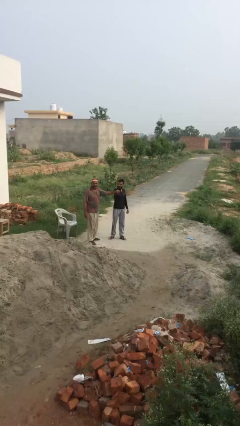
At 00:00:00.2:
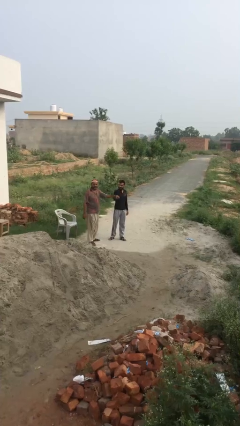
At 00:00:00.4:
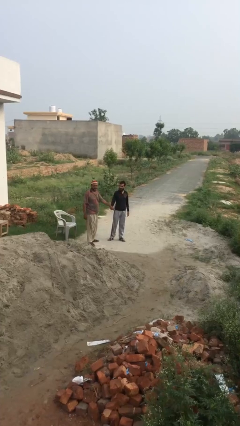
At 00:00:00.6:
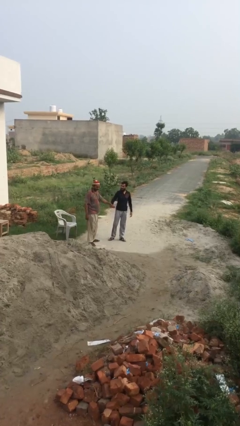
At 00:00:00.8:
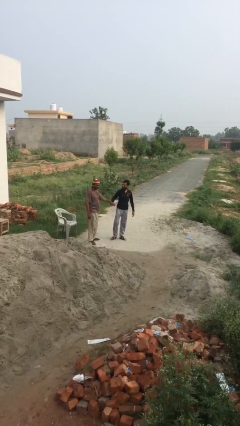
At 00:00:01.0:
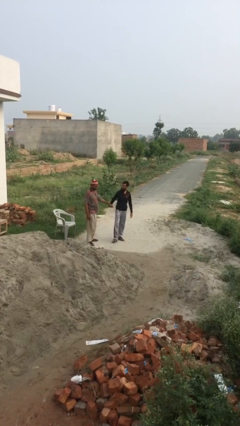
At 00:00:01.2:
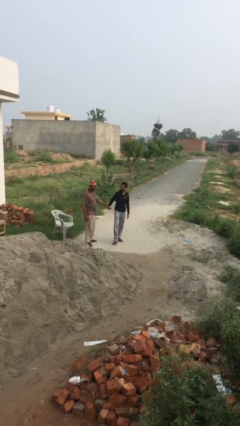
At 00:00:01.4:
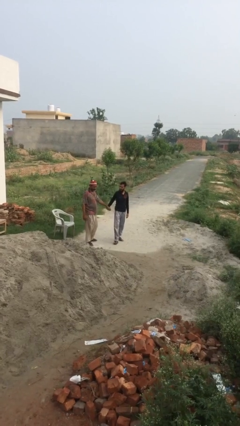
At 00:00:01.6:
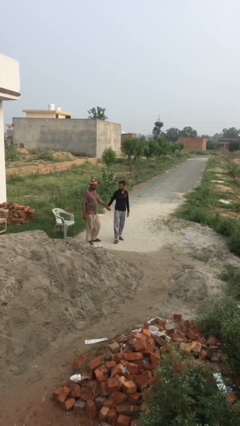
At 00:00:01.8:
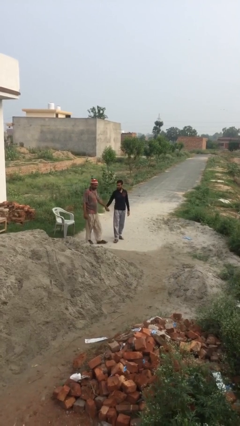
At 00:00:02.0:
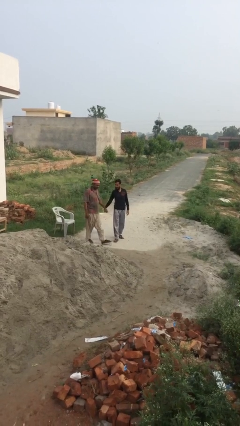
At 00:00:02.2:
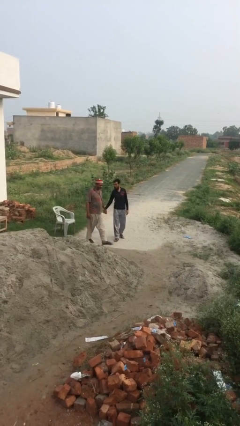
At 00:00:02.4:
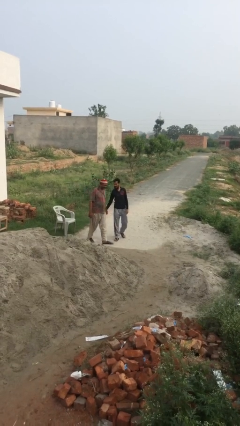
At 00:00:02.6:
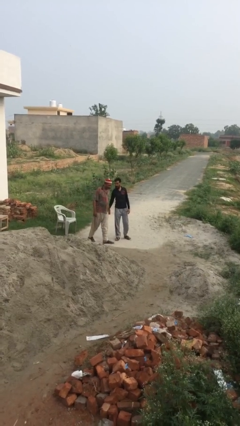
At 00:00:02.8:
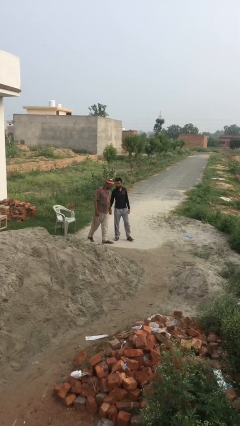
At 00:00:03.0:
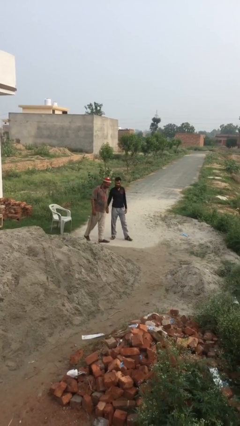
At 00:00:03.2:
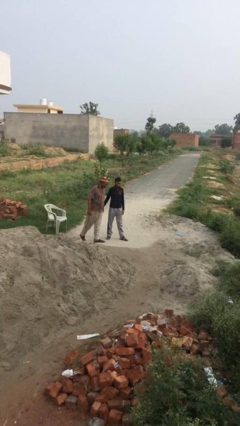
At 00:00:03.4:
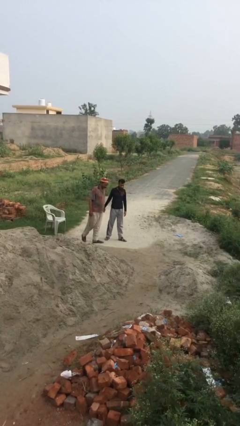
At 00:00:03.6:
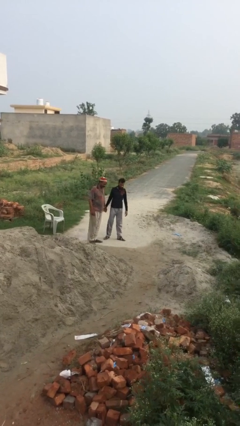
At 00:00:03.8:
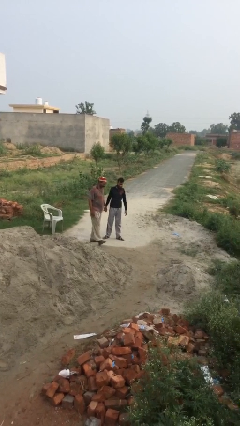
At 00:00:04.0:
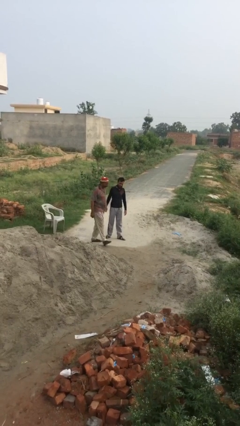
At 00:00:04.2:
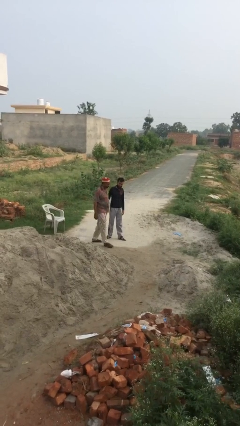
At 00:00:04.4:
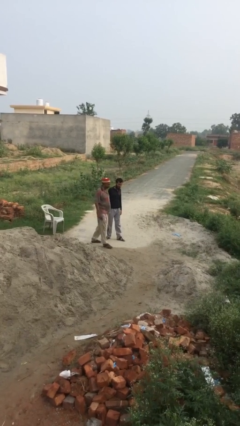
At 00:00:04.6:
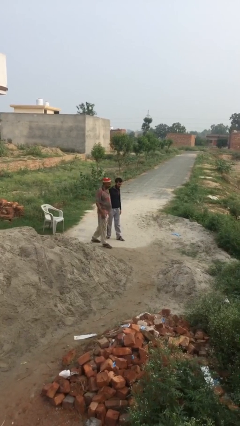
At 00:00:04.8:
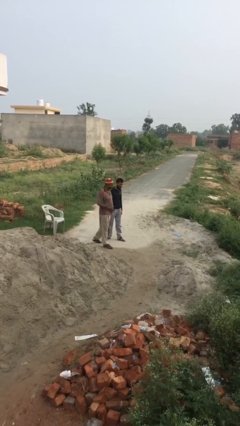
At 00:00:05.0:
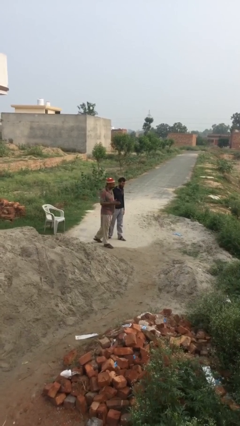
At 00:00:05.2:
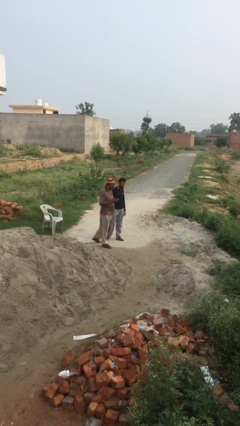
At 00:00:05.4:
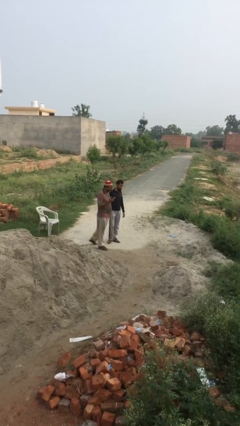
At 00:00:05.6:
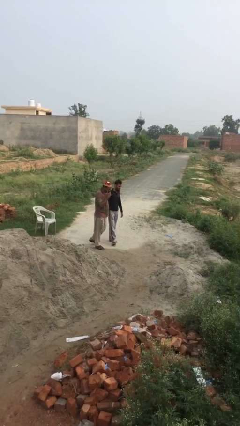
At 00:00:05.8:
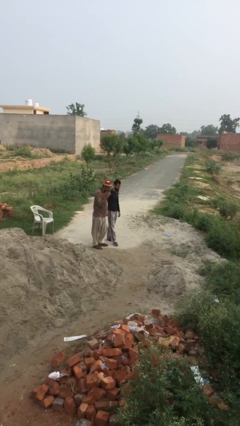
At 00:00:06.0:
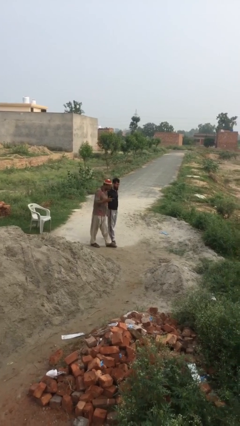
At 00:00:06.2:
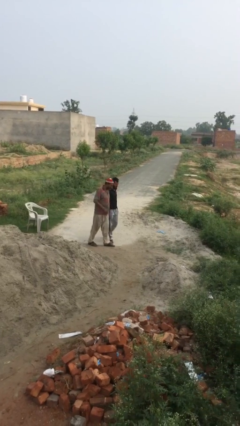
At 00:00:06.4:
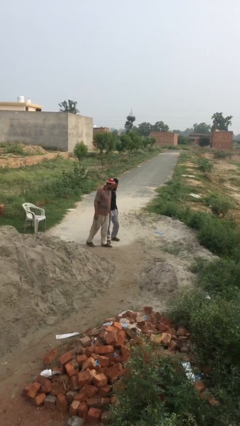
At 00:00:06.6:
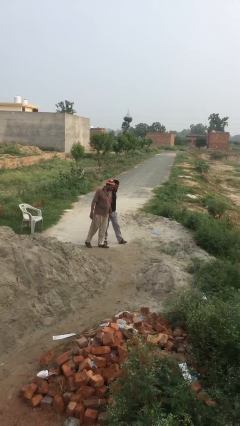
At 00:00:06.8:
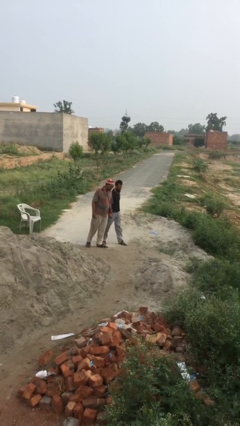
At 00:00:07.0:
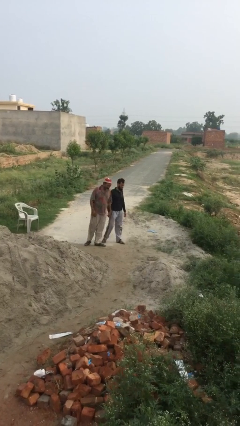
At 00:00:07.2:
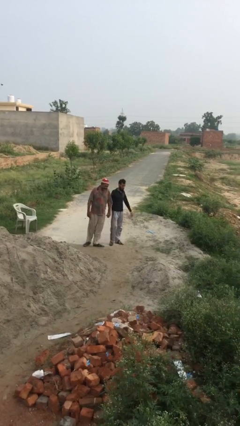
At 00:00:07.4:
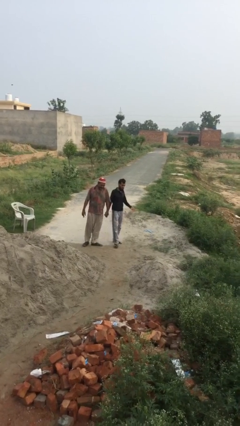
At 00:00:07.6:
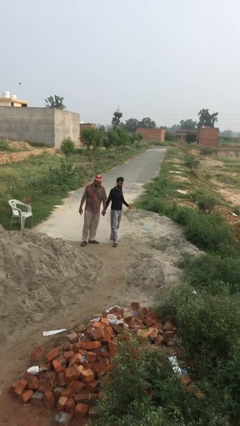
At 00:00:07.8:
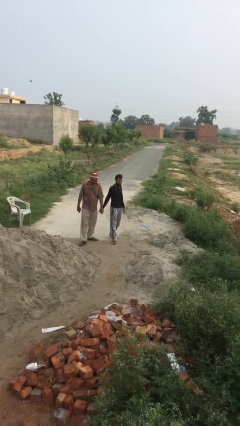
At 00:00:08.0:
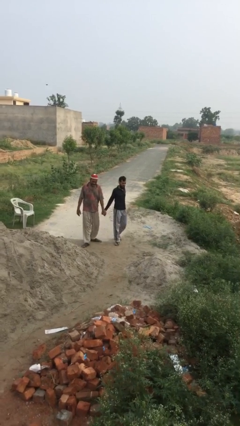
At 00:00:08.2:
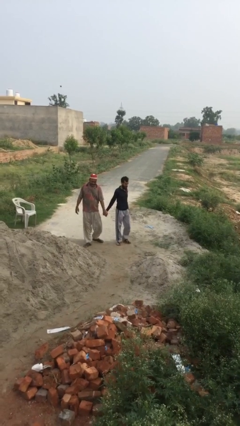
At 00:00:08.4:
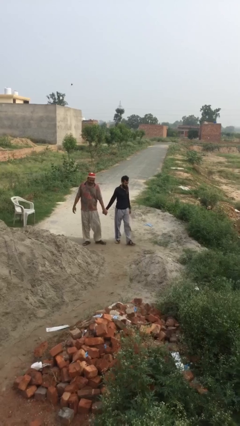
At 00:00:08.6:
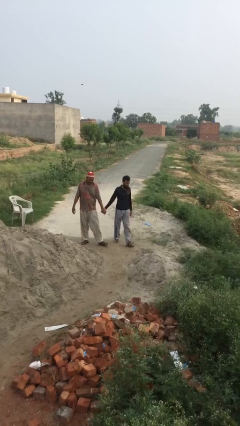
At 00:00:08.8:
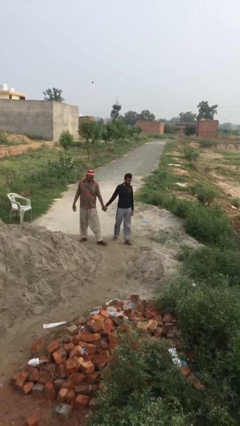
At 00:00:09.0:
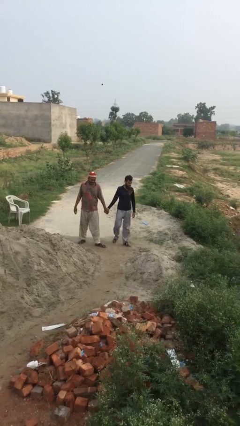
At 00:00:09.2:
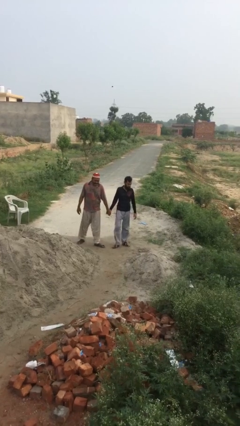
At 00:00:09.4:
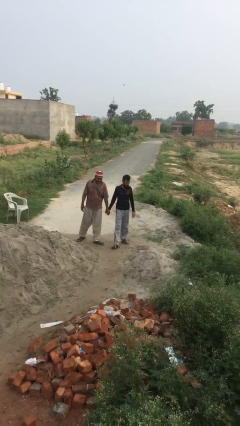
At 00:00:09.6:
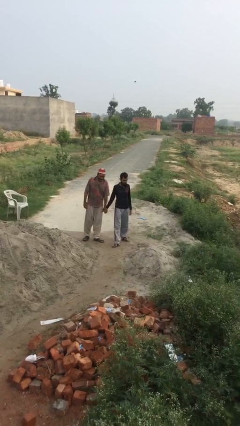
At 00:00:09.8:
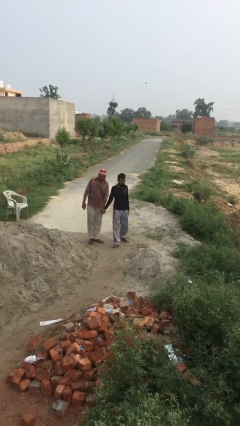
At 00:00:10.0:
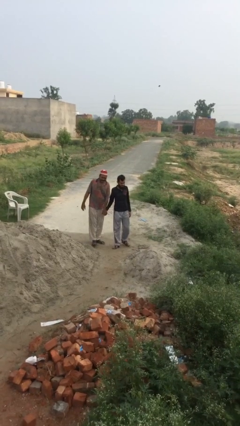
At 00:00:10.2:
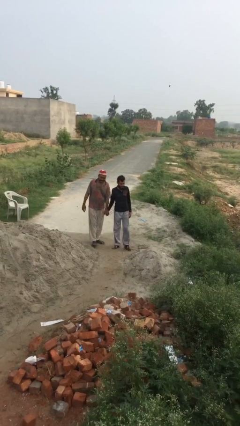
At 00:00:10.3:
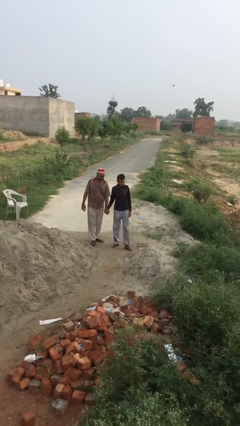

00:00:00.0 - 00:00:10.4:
person holds hand

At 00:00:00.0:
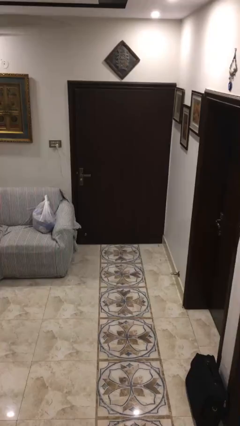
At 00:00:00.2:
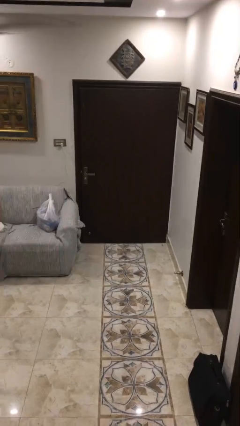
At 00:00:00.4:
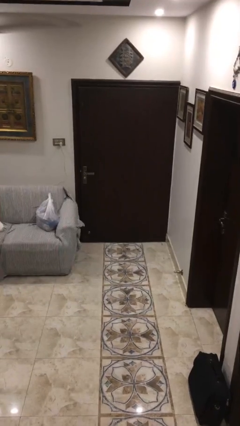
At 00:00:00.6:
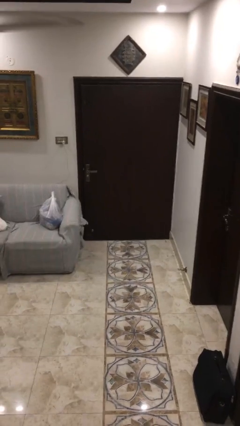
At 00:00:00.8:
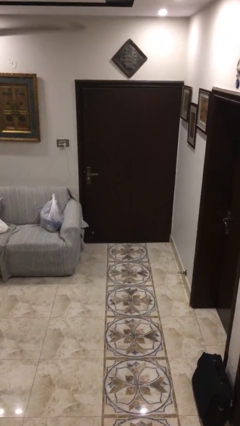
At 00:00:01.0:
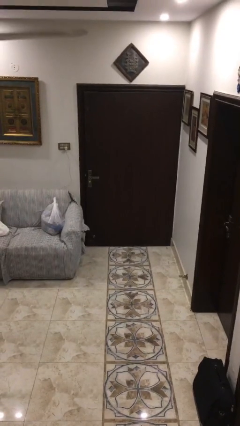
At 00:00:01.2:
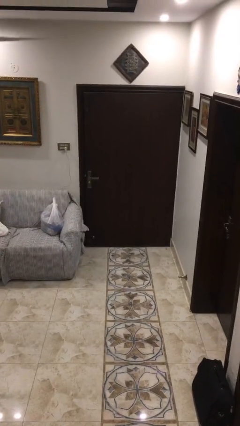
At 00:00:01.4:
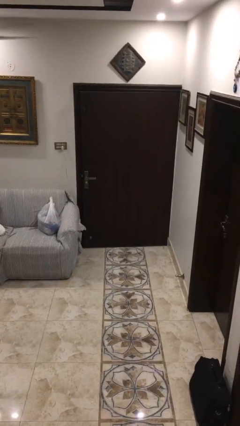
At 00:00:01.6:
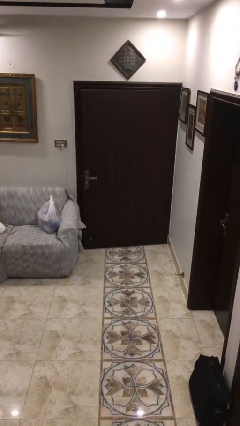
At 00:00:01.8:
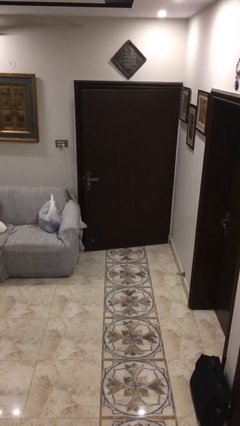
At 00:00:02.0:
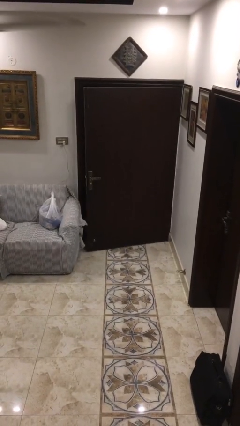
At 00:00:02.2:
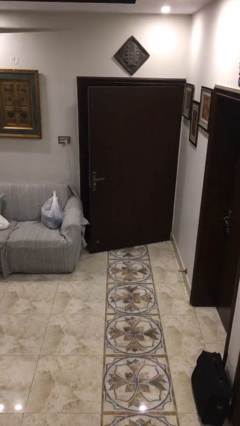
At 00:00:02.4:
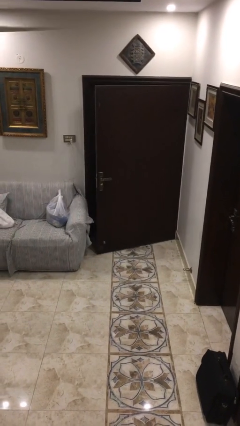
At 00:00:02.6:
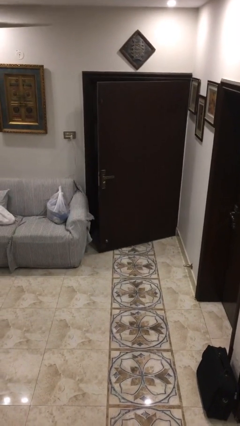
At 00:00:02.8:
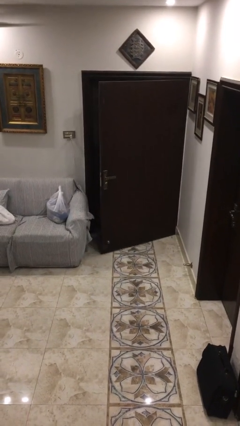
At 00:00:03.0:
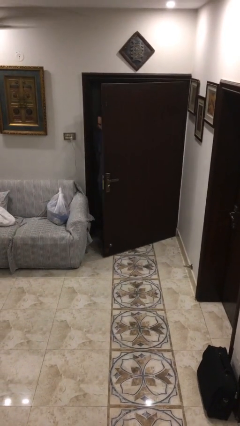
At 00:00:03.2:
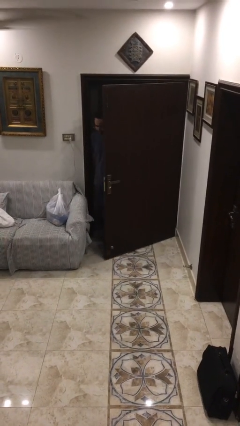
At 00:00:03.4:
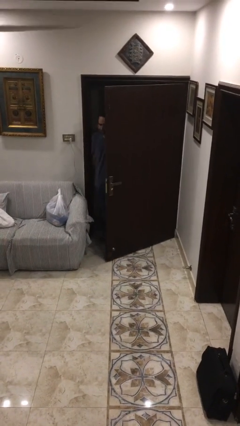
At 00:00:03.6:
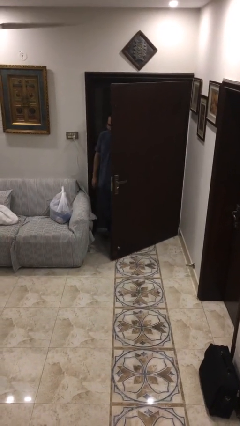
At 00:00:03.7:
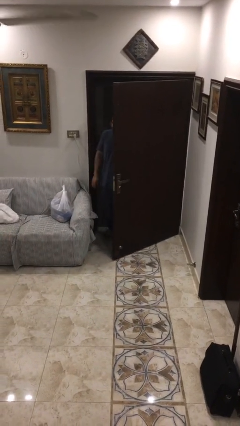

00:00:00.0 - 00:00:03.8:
person opens facility door

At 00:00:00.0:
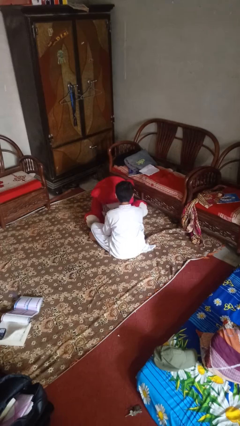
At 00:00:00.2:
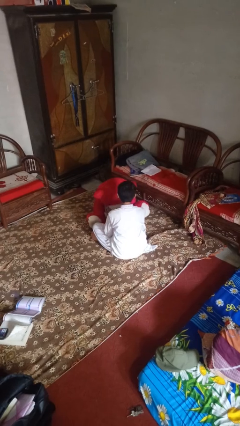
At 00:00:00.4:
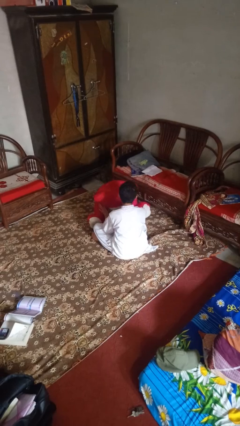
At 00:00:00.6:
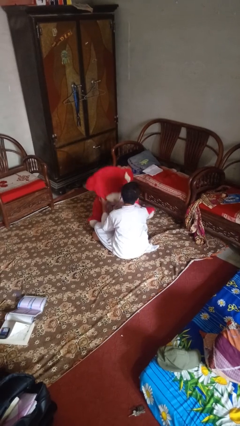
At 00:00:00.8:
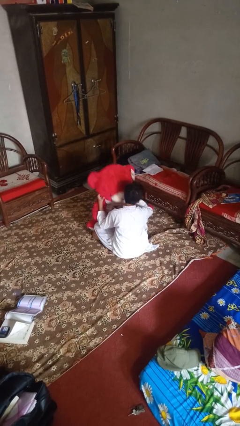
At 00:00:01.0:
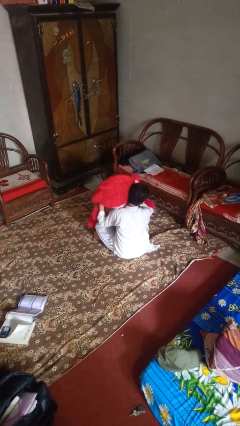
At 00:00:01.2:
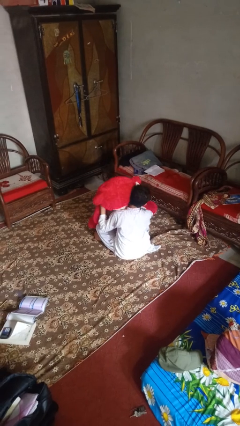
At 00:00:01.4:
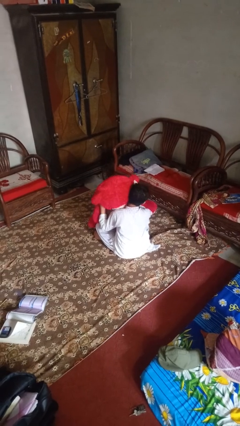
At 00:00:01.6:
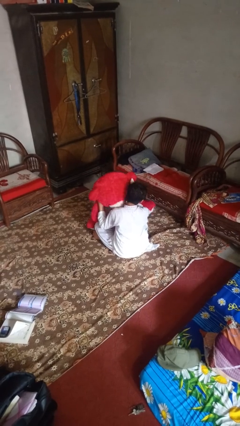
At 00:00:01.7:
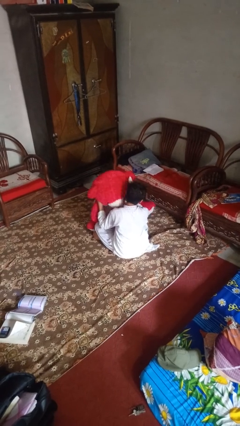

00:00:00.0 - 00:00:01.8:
person hugs stuffed animal

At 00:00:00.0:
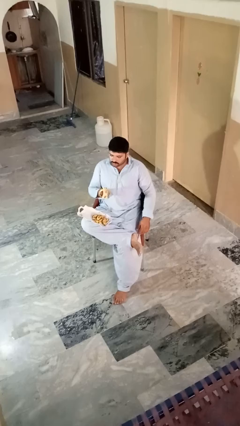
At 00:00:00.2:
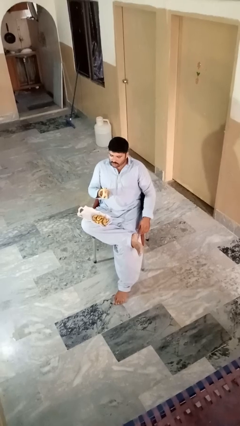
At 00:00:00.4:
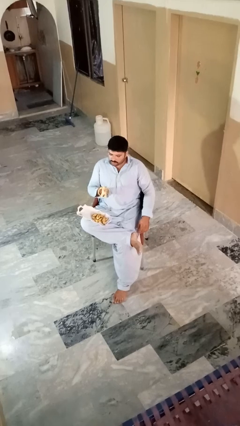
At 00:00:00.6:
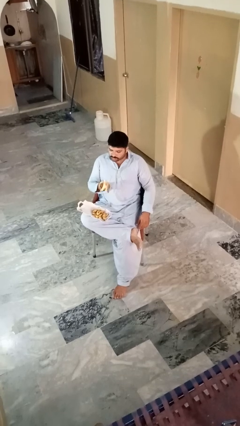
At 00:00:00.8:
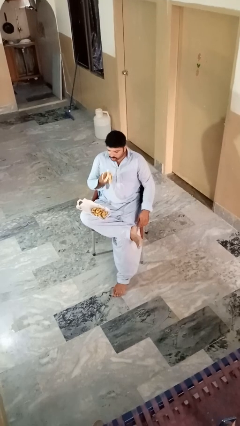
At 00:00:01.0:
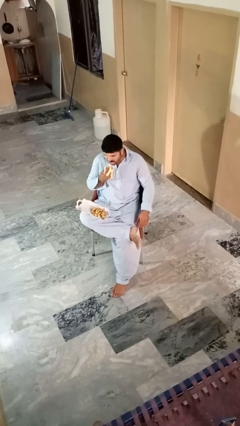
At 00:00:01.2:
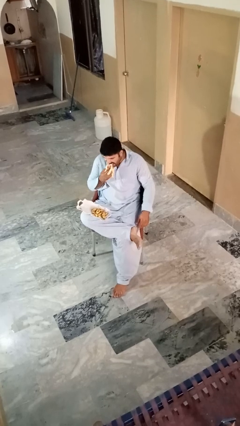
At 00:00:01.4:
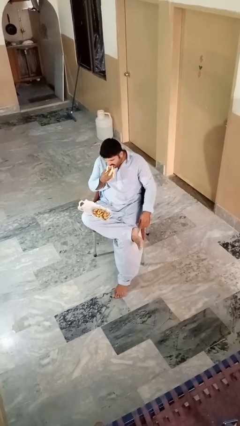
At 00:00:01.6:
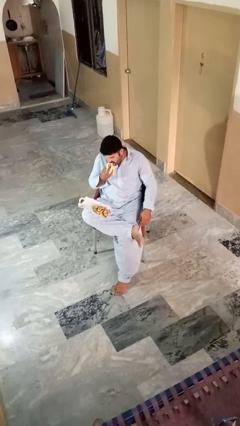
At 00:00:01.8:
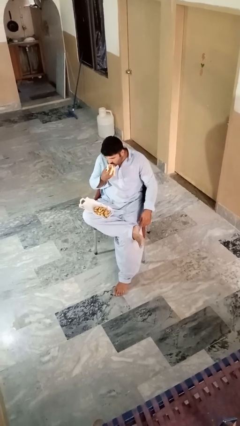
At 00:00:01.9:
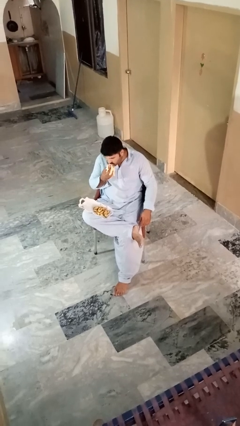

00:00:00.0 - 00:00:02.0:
person eats banana
